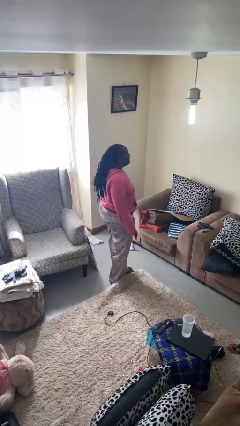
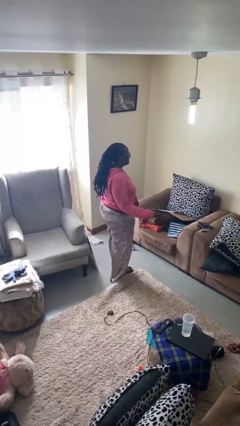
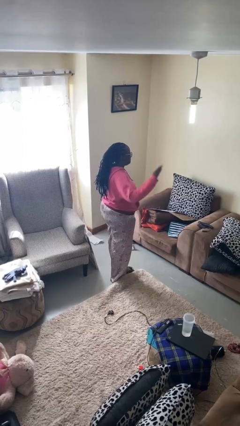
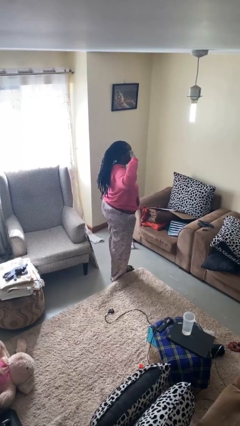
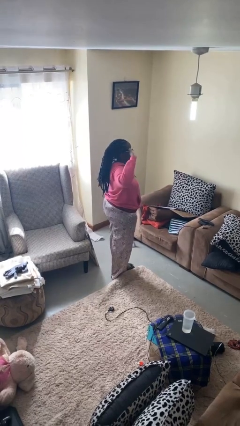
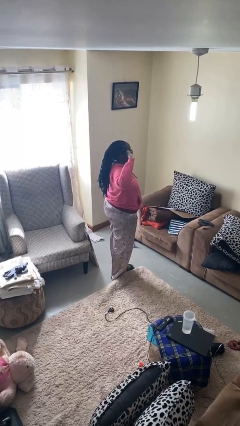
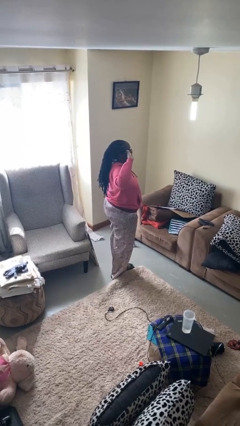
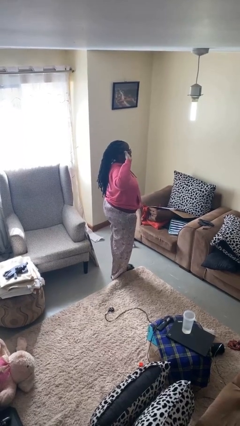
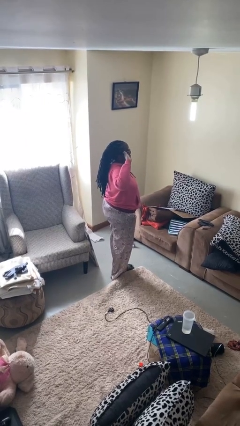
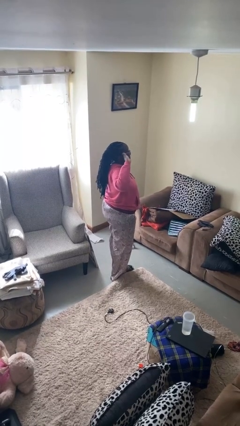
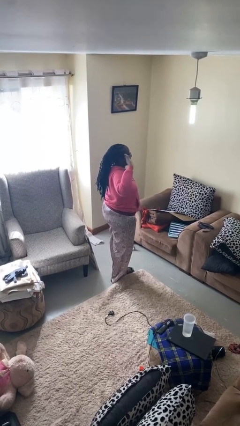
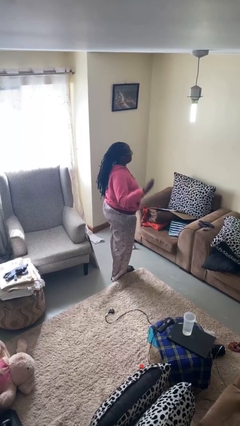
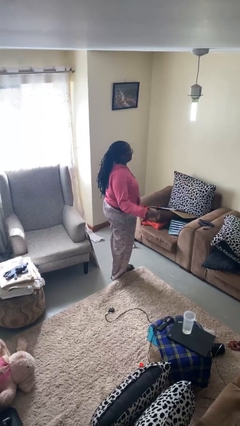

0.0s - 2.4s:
person salutes

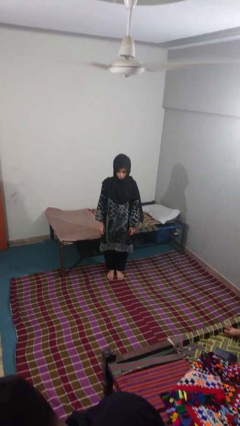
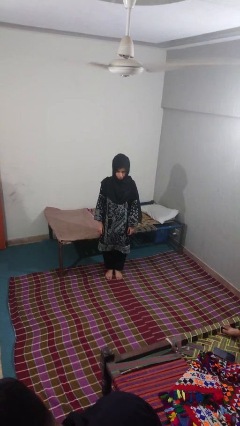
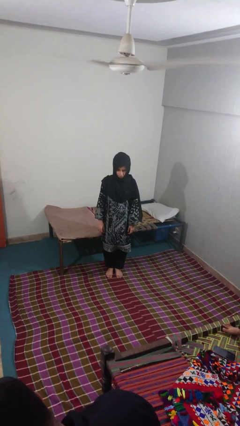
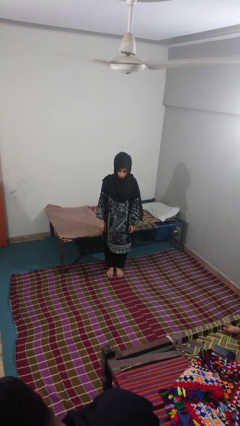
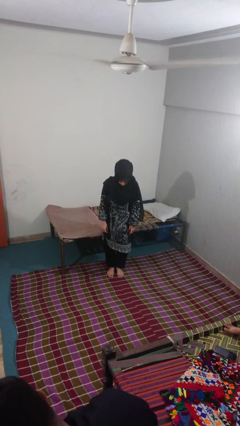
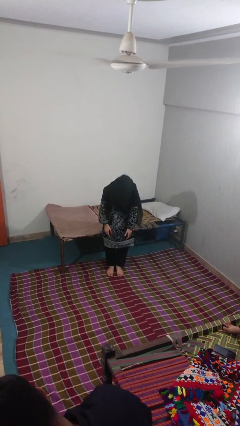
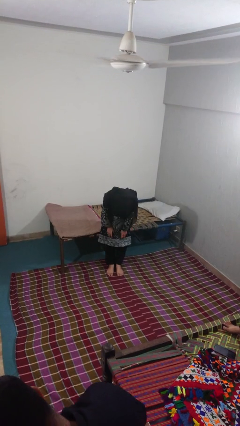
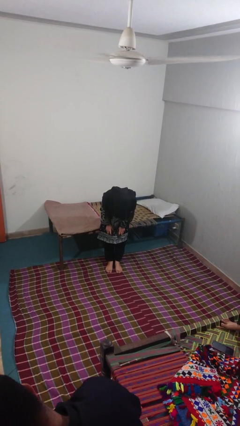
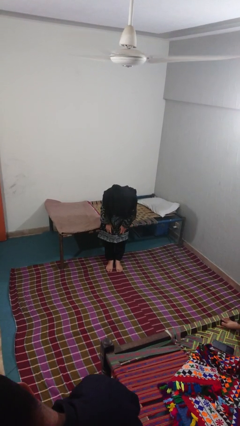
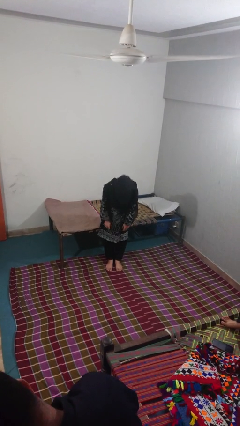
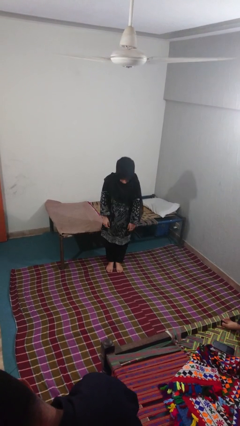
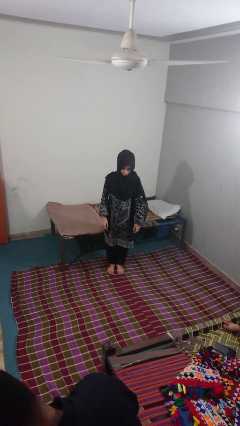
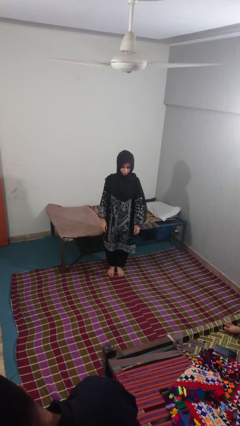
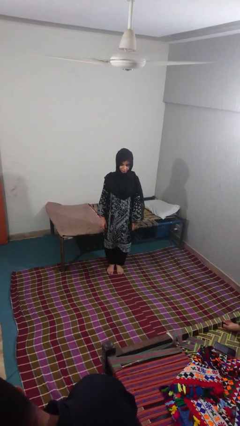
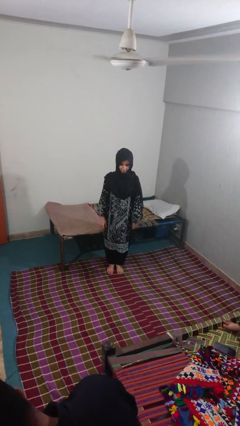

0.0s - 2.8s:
person bows

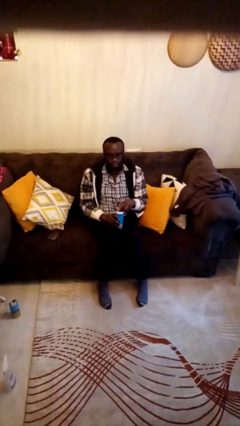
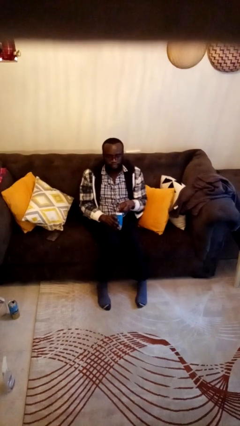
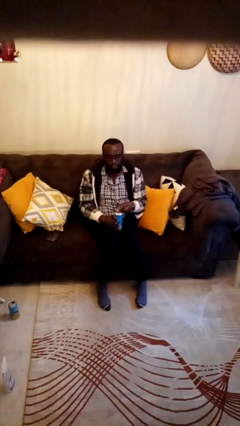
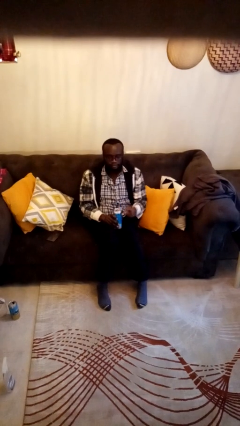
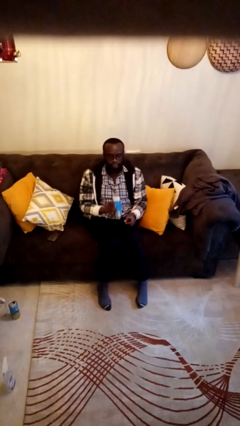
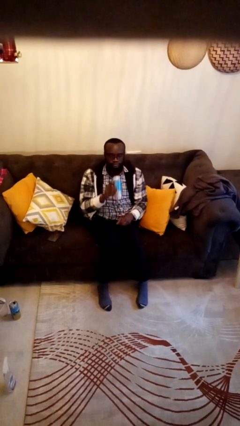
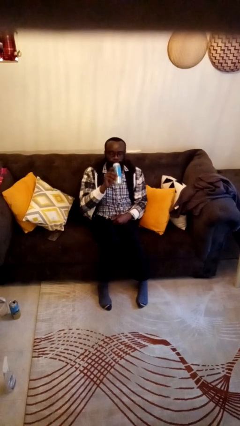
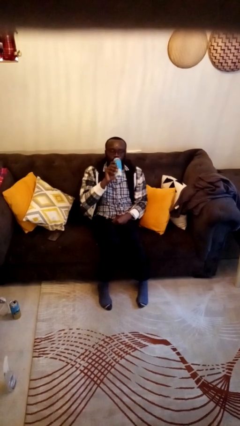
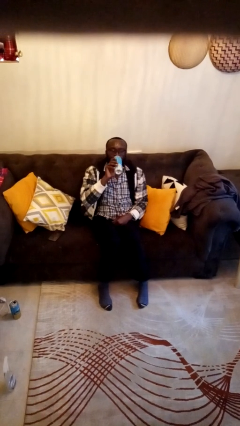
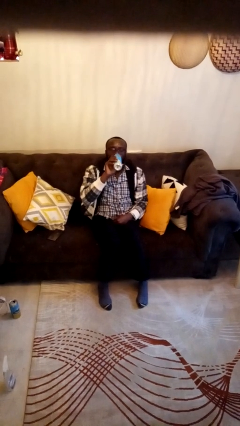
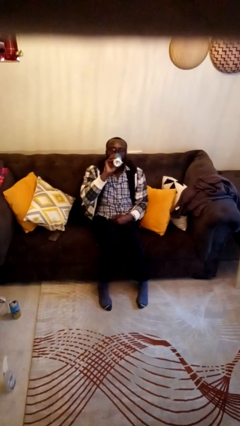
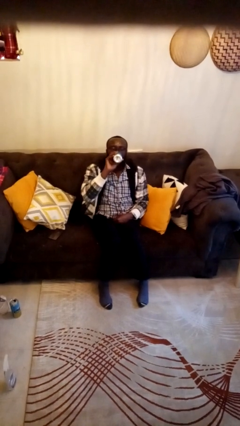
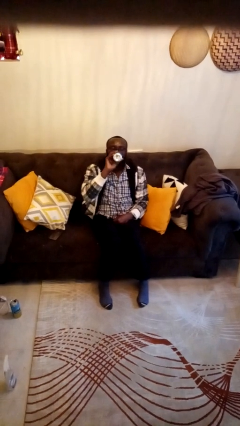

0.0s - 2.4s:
person drinks from beverage can

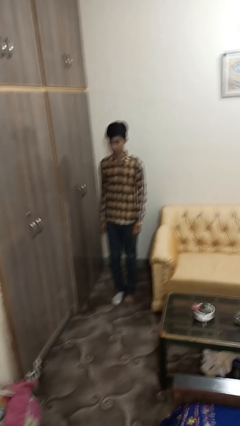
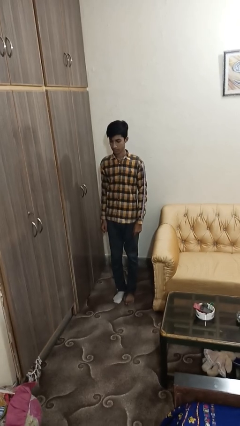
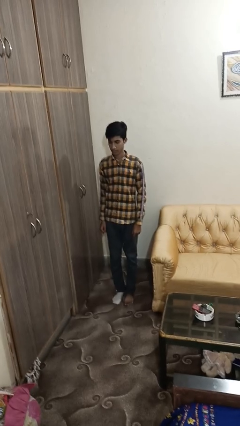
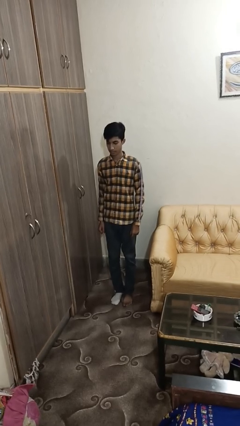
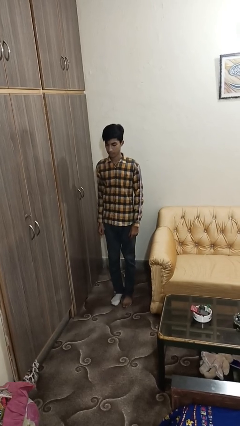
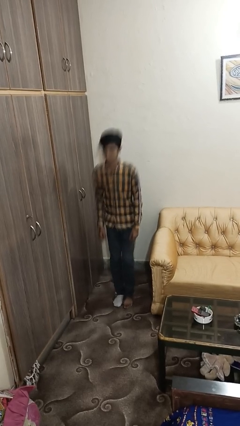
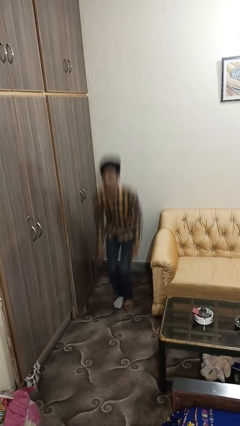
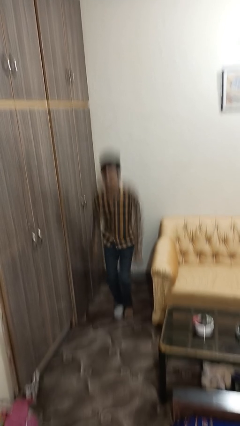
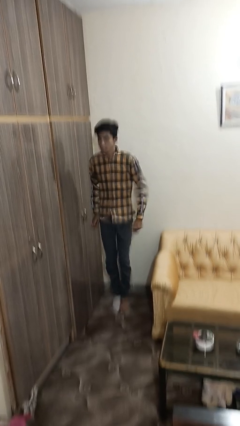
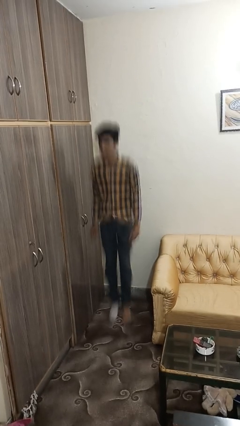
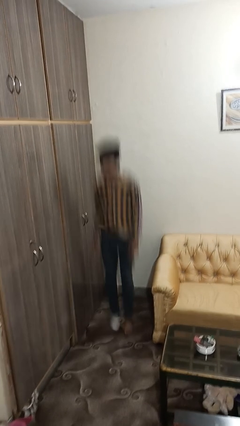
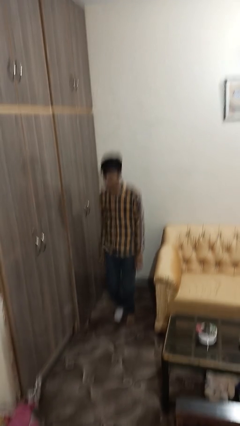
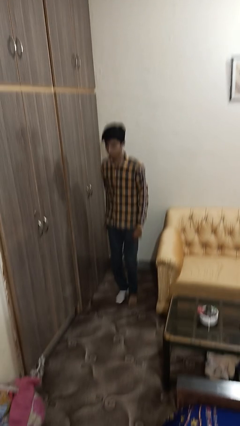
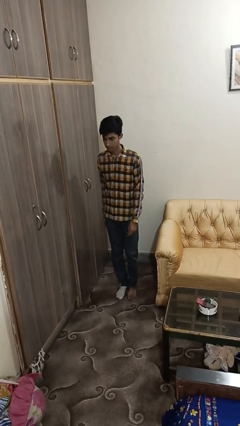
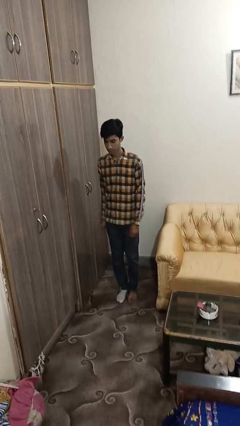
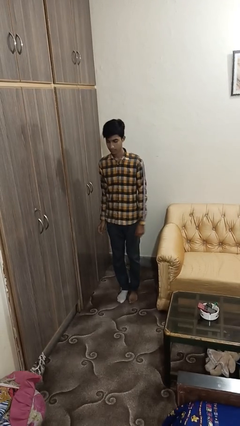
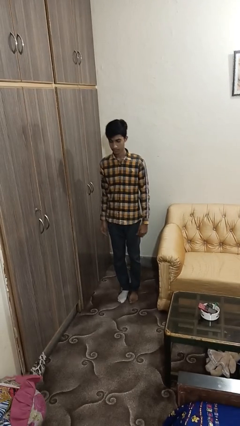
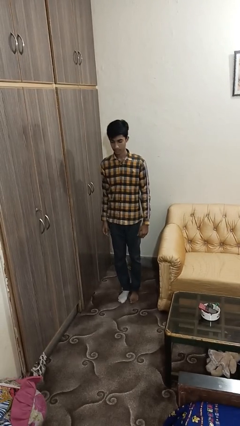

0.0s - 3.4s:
person jumps

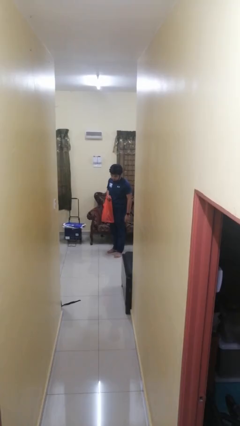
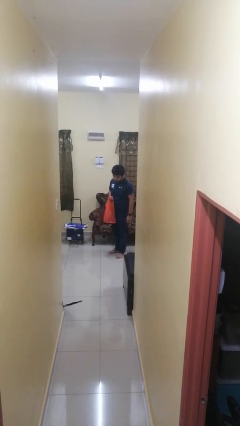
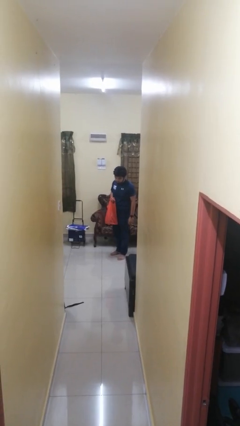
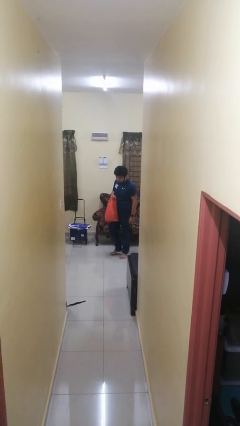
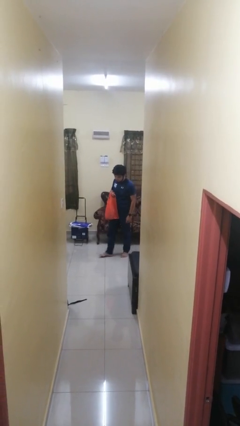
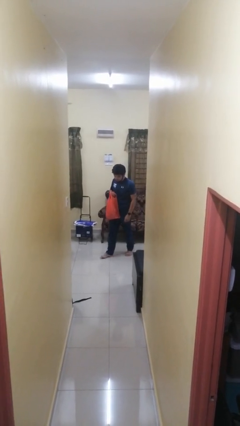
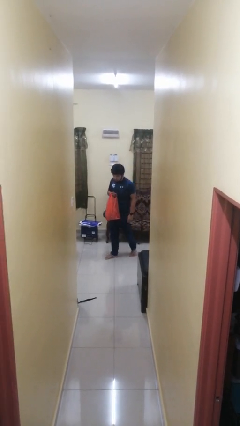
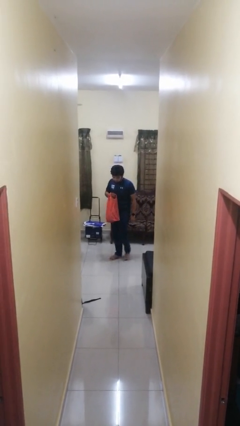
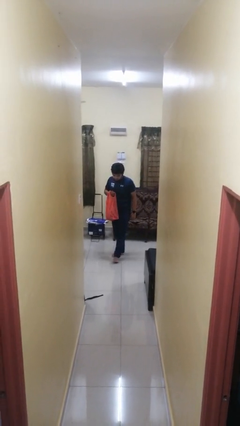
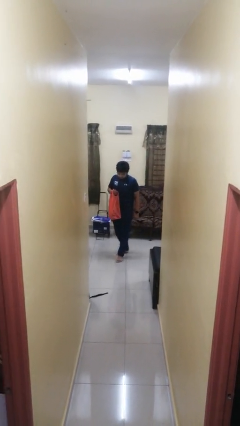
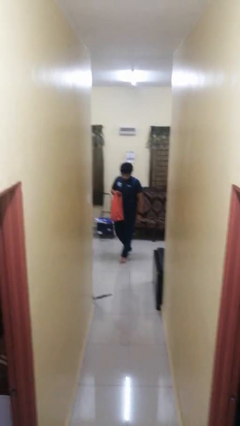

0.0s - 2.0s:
person carries groceries

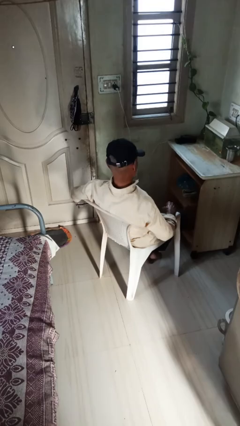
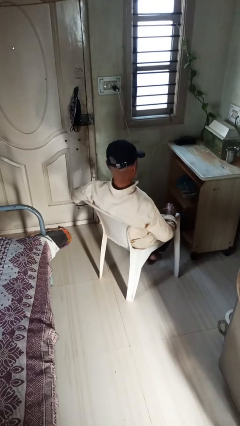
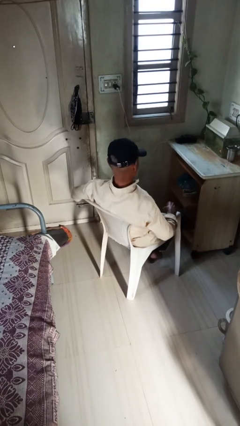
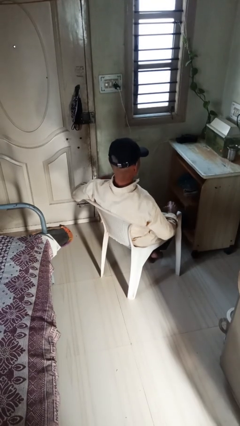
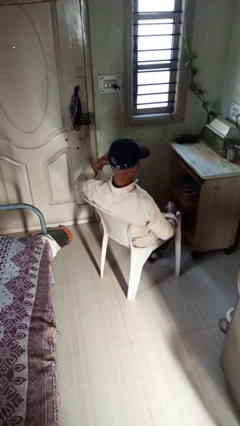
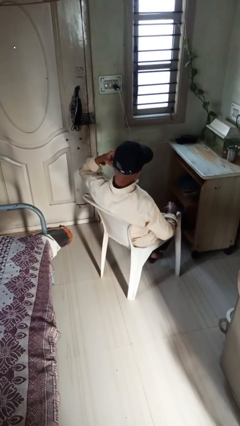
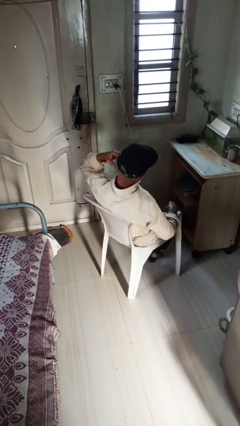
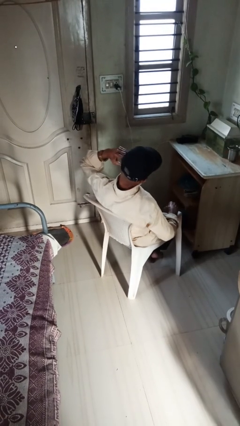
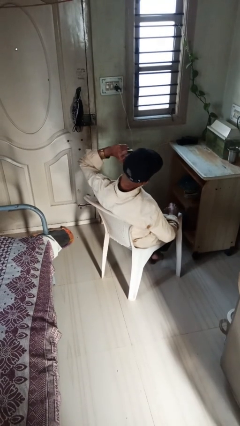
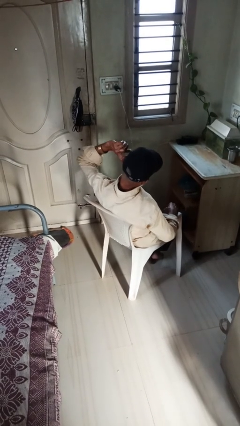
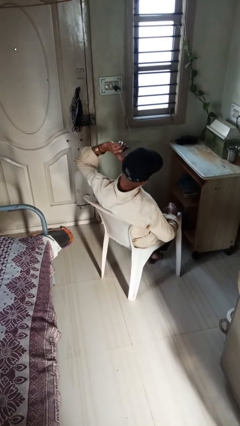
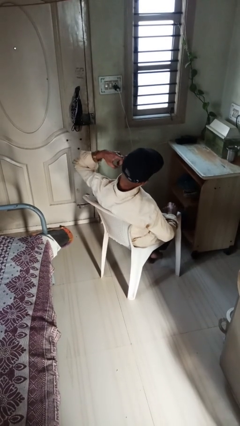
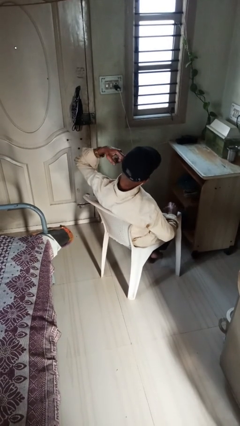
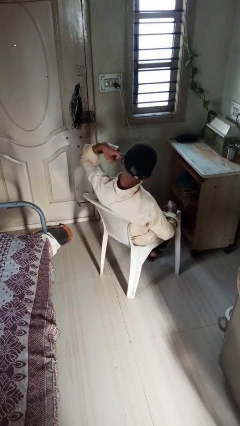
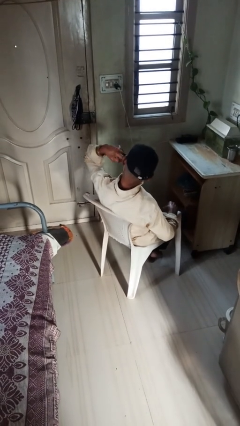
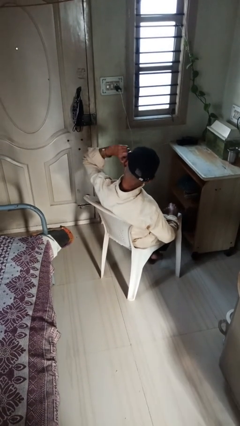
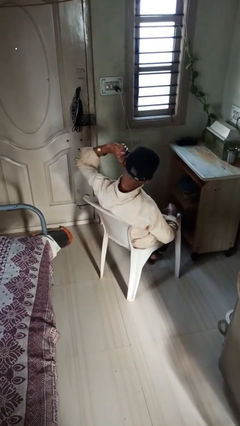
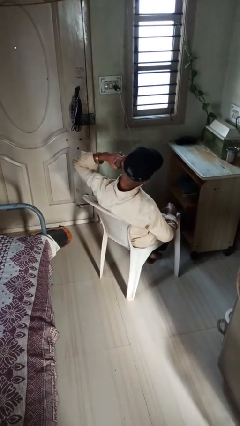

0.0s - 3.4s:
person puts fingers in ear

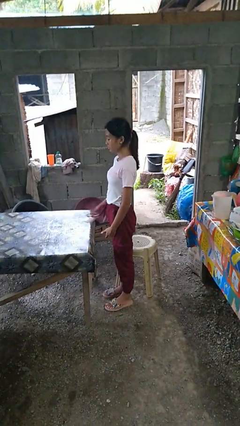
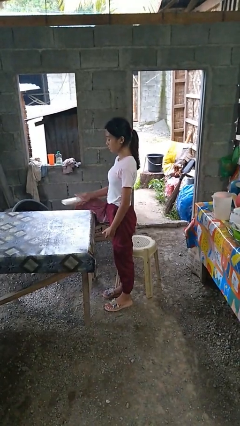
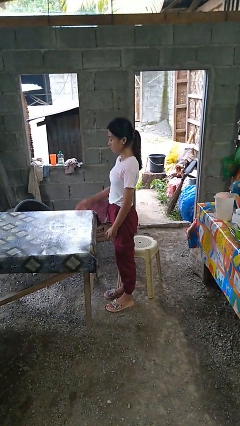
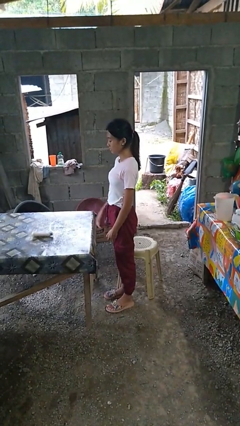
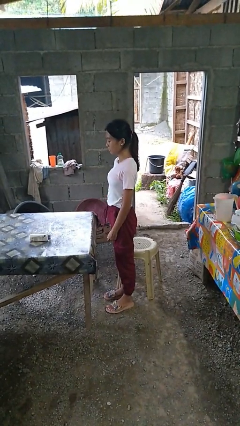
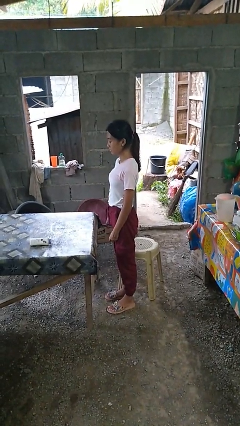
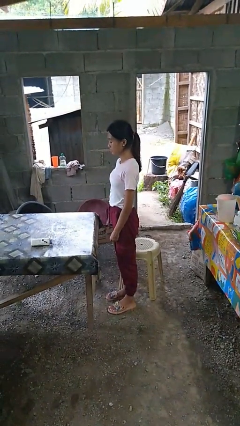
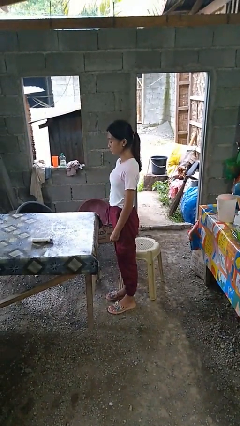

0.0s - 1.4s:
person throws object on table
